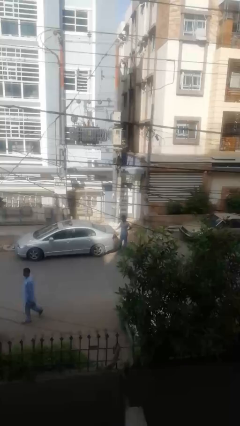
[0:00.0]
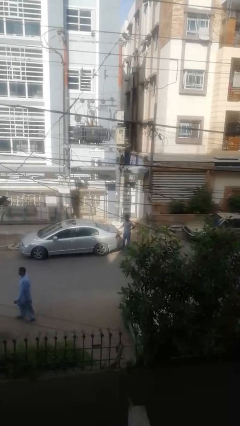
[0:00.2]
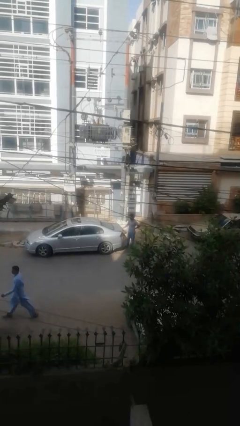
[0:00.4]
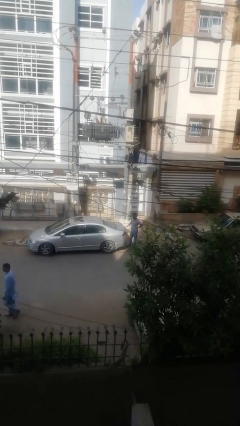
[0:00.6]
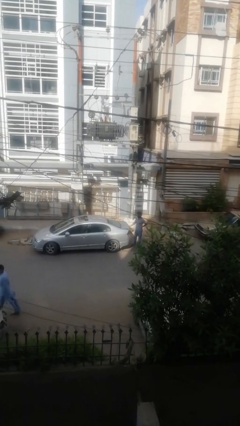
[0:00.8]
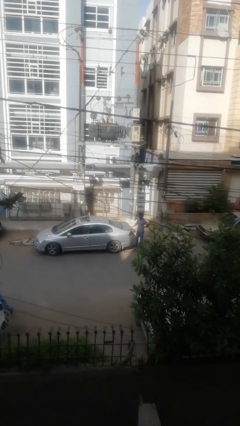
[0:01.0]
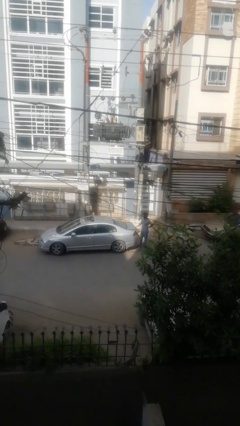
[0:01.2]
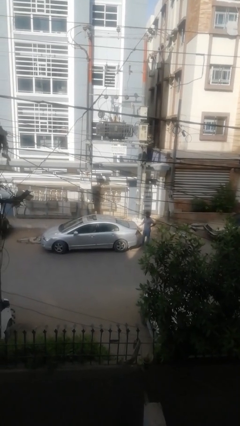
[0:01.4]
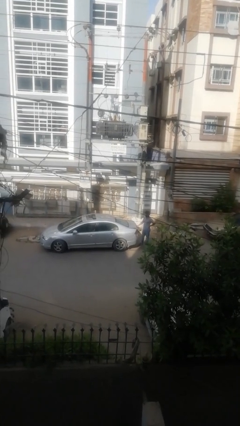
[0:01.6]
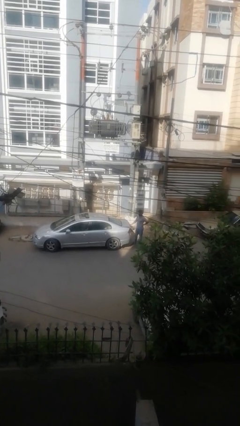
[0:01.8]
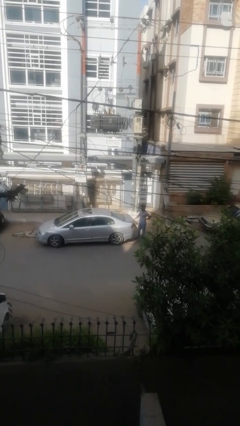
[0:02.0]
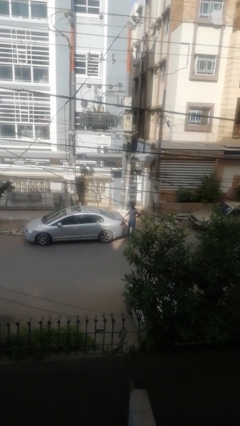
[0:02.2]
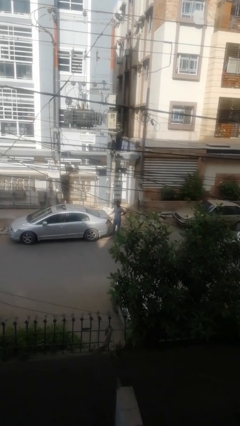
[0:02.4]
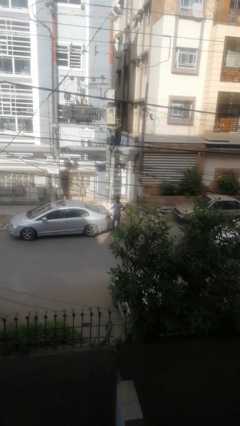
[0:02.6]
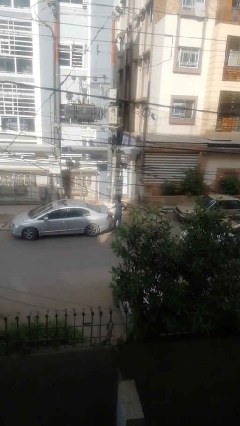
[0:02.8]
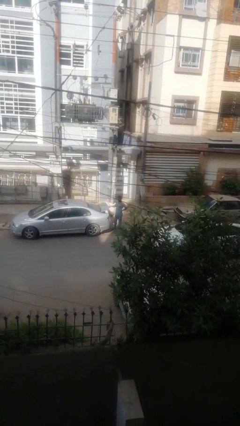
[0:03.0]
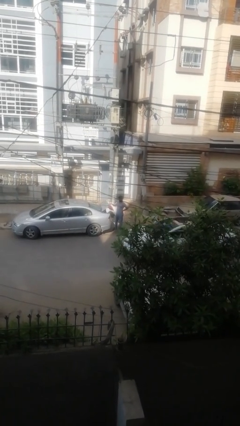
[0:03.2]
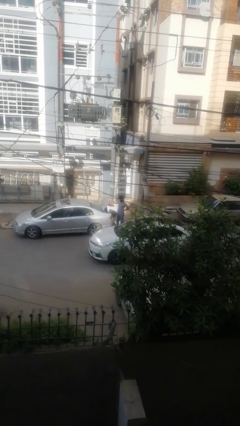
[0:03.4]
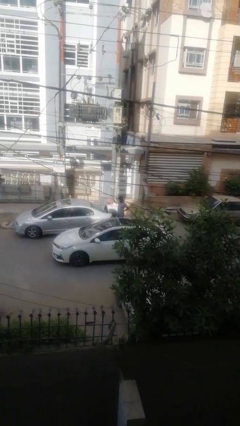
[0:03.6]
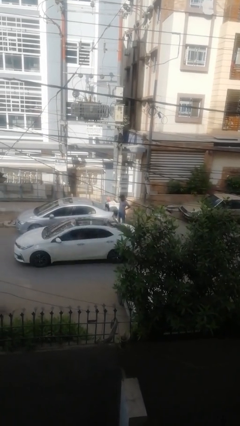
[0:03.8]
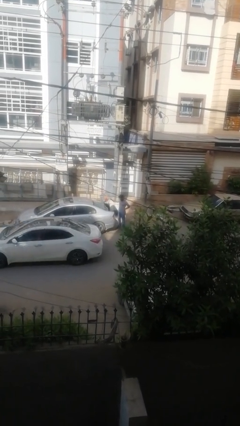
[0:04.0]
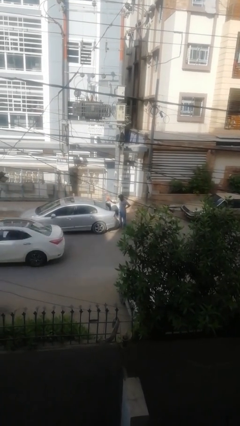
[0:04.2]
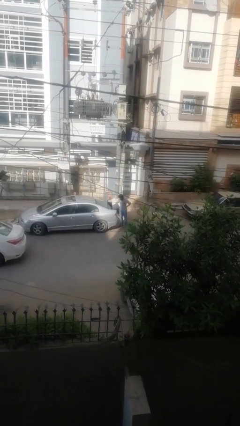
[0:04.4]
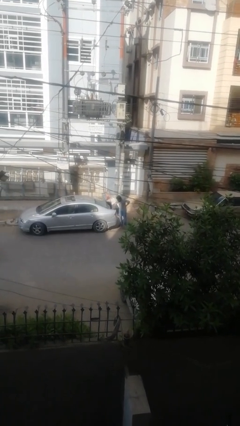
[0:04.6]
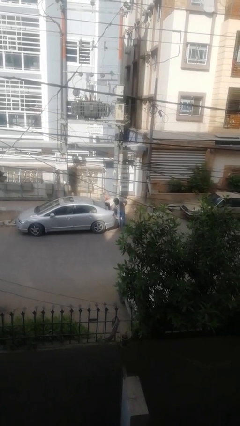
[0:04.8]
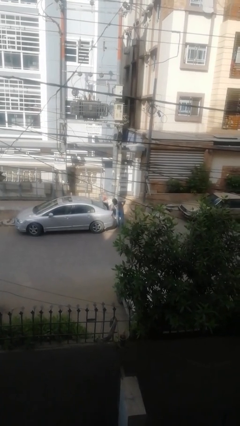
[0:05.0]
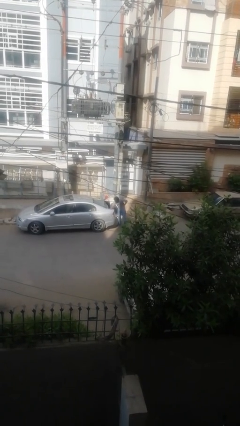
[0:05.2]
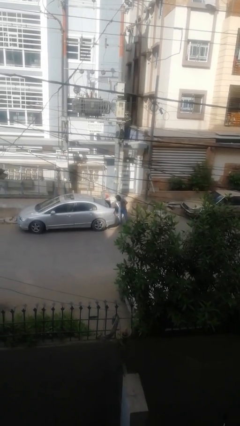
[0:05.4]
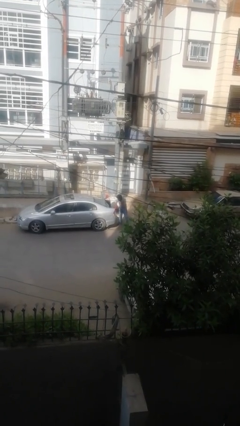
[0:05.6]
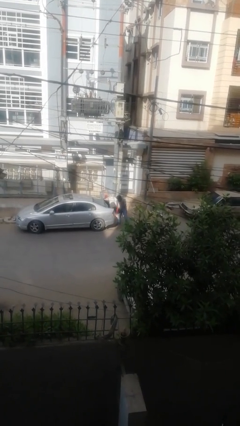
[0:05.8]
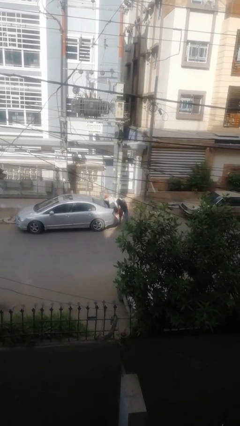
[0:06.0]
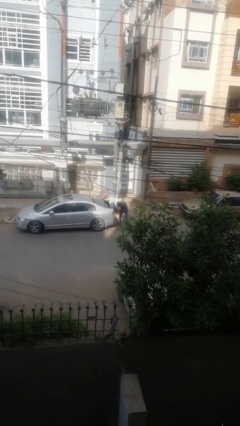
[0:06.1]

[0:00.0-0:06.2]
person enters car

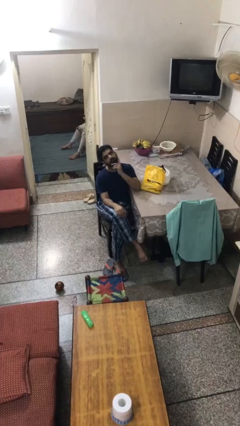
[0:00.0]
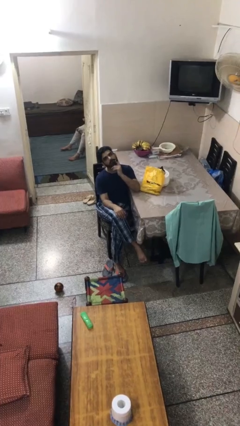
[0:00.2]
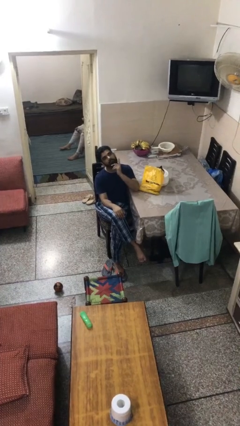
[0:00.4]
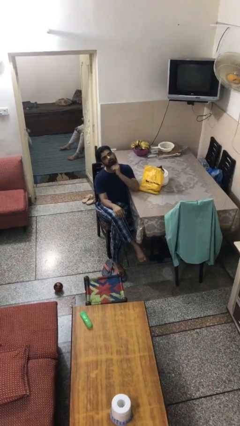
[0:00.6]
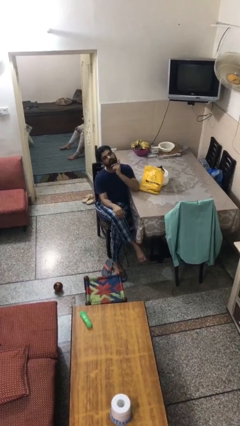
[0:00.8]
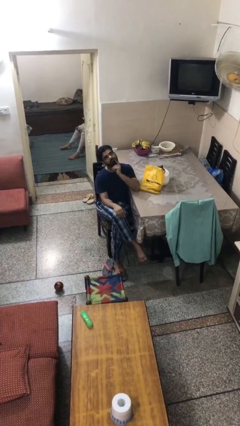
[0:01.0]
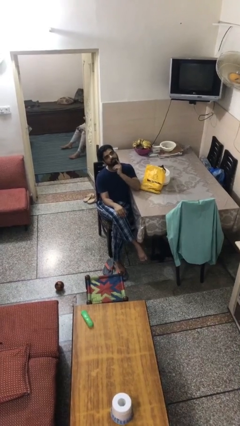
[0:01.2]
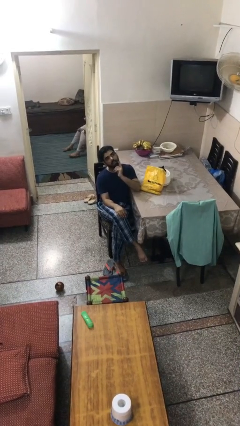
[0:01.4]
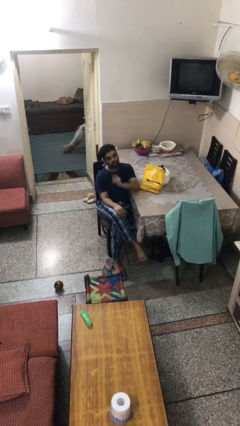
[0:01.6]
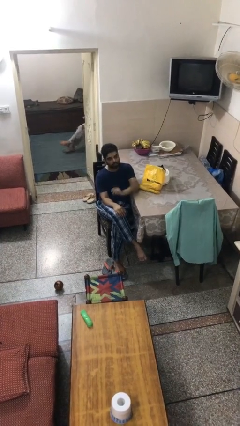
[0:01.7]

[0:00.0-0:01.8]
person strokes chin

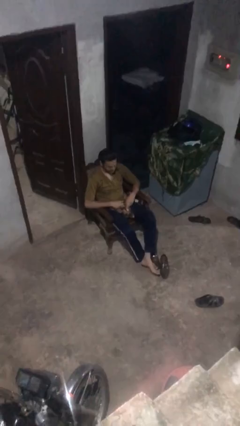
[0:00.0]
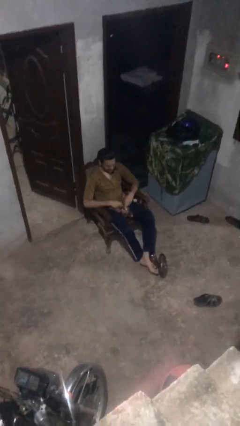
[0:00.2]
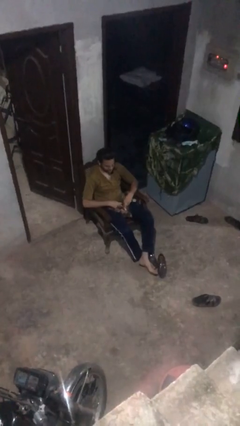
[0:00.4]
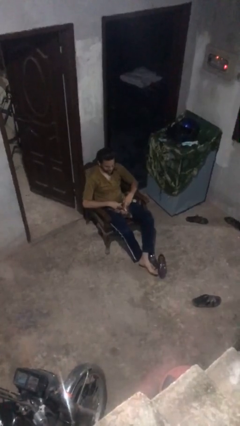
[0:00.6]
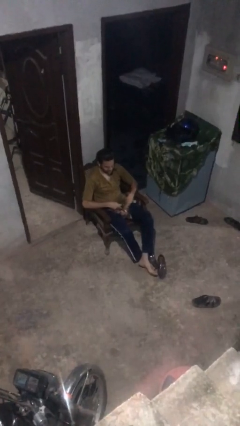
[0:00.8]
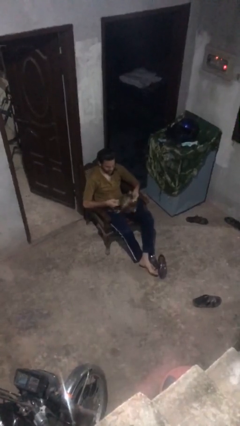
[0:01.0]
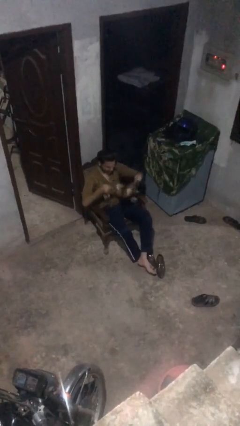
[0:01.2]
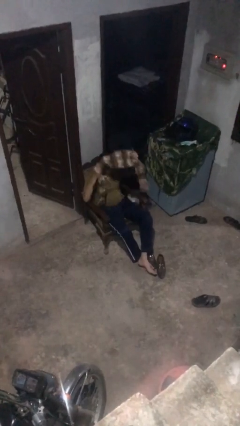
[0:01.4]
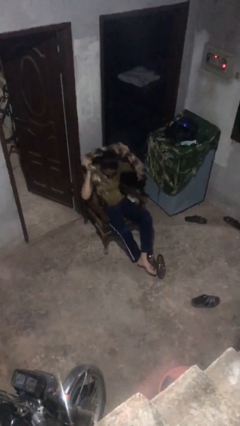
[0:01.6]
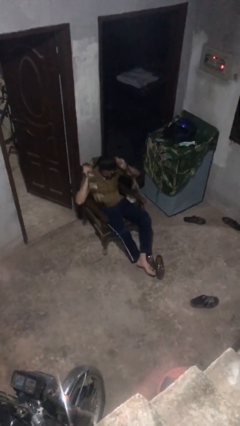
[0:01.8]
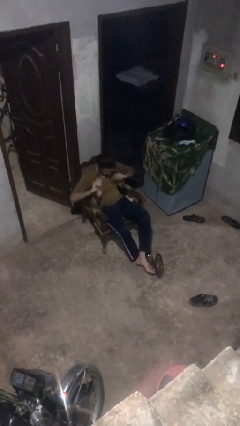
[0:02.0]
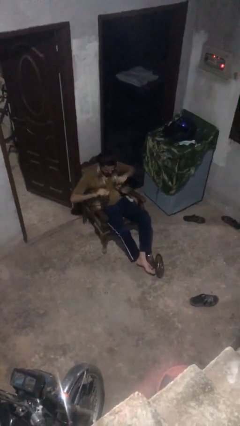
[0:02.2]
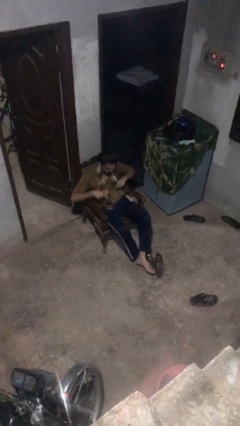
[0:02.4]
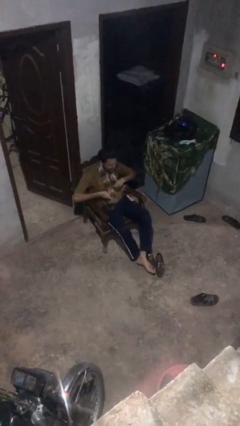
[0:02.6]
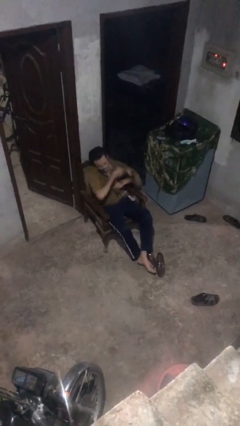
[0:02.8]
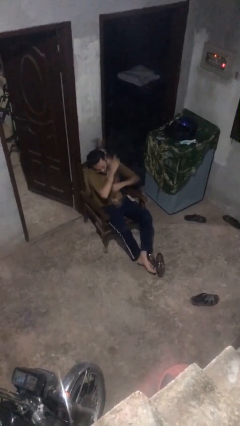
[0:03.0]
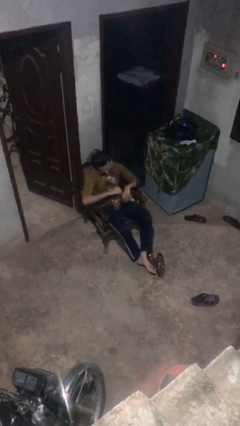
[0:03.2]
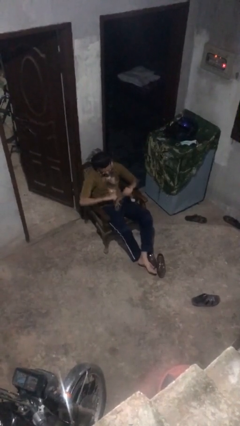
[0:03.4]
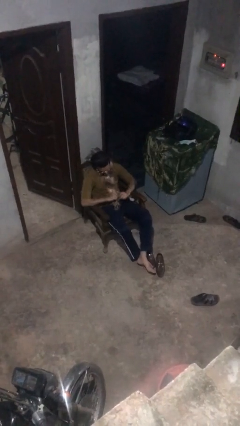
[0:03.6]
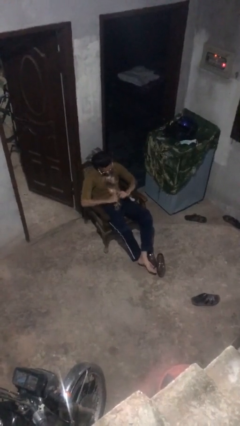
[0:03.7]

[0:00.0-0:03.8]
person puts on scarf

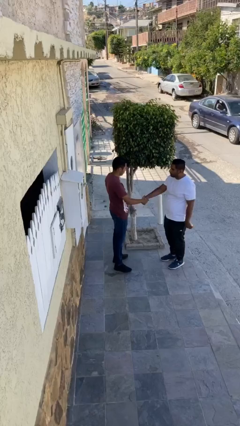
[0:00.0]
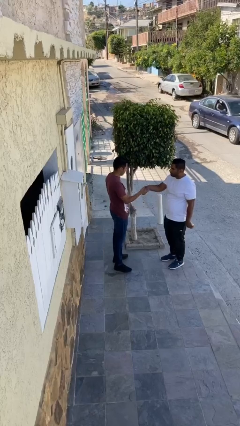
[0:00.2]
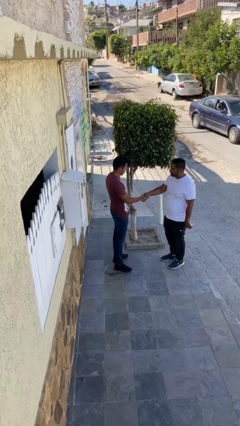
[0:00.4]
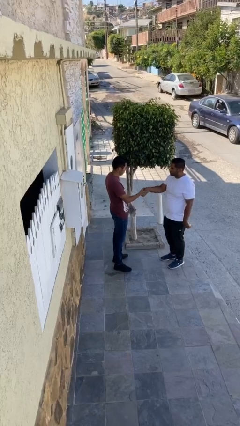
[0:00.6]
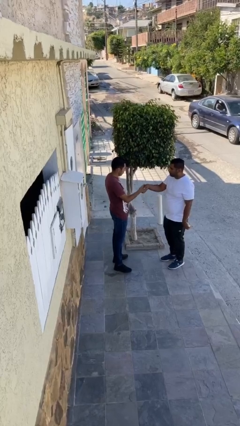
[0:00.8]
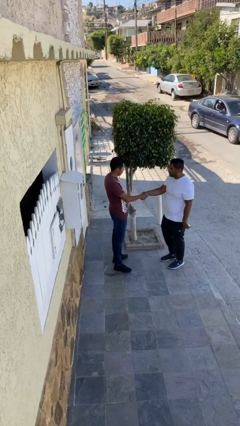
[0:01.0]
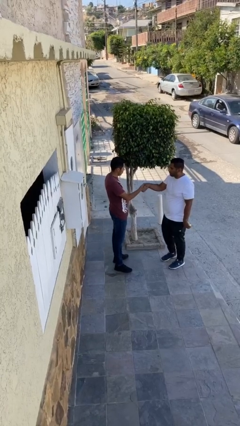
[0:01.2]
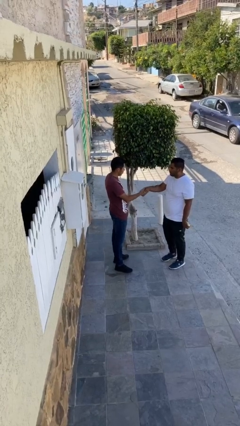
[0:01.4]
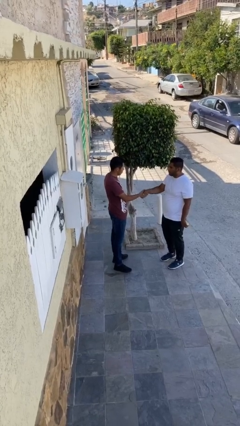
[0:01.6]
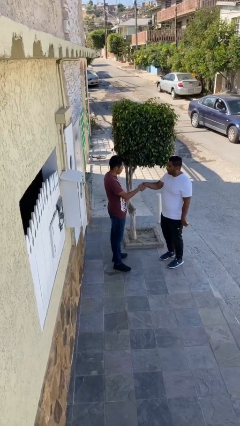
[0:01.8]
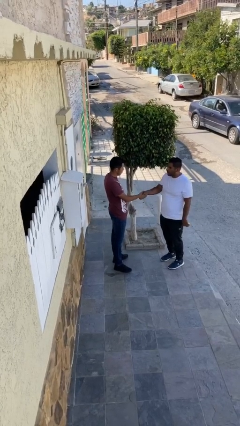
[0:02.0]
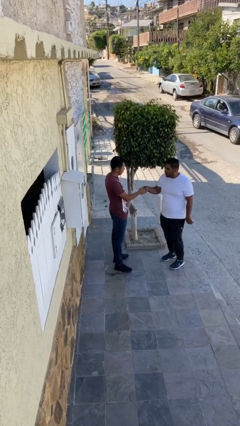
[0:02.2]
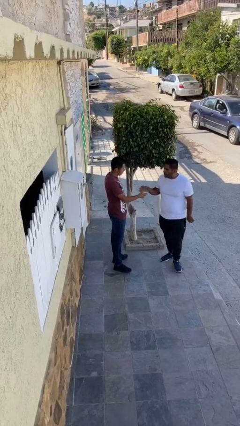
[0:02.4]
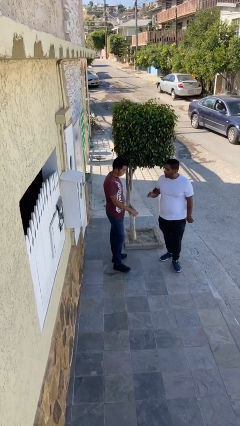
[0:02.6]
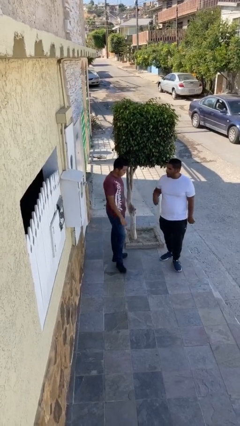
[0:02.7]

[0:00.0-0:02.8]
person shakes hand

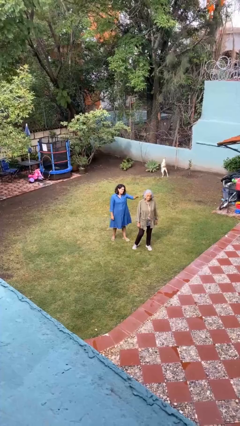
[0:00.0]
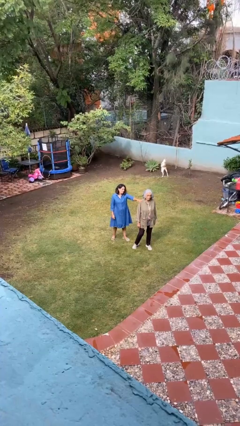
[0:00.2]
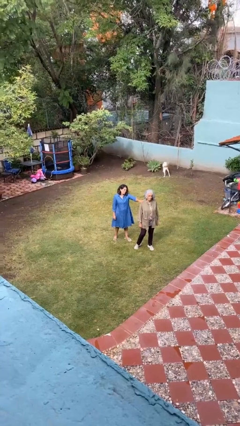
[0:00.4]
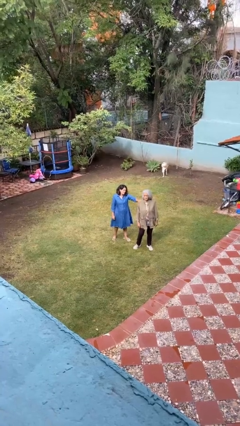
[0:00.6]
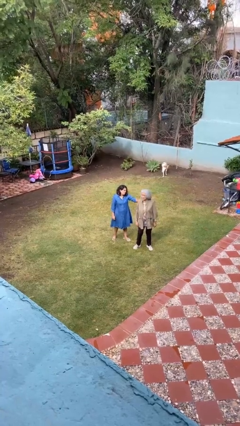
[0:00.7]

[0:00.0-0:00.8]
person grabs person by shoulder

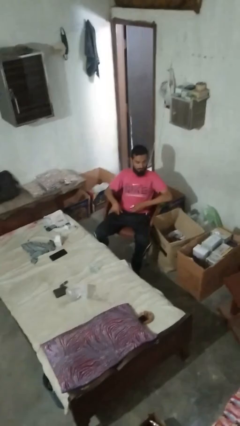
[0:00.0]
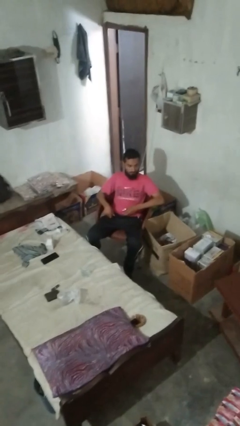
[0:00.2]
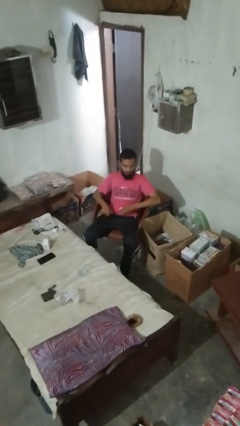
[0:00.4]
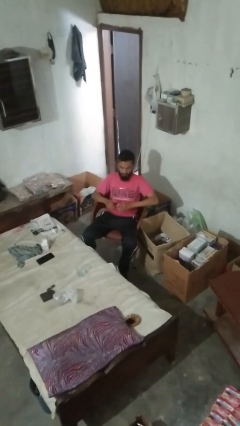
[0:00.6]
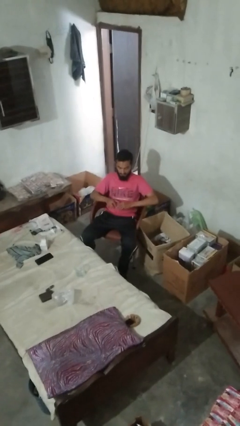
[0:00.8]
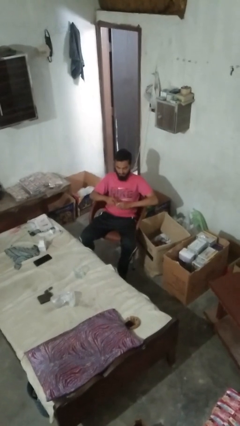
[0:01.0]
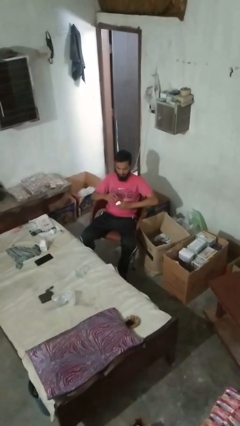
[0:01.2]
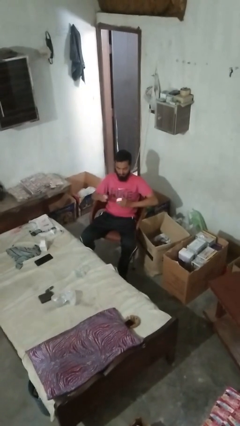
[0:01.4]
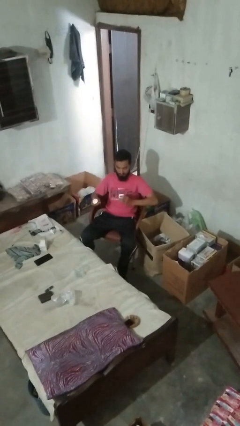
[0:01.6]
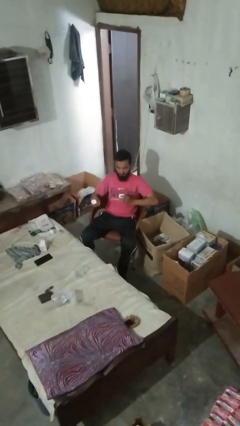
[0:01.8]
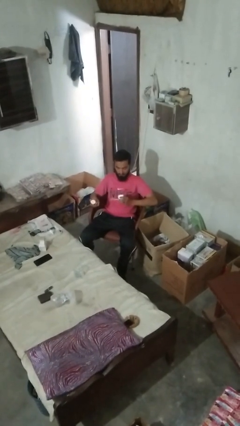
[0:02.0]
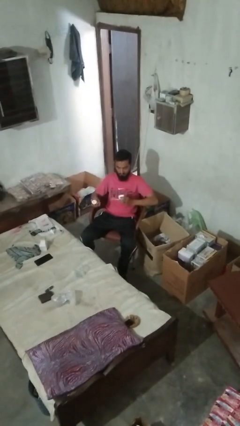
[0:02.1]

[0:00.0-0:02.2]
person opens jar
